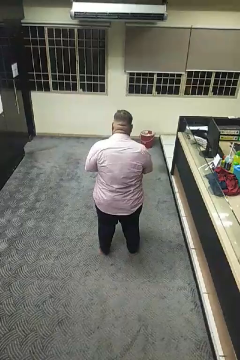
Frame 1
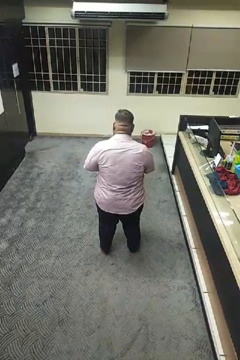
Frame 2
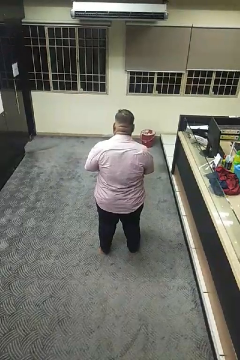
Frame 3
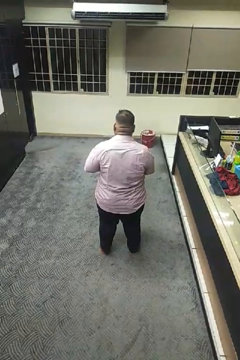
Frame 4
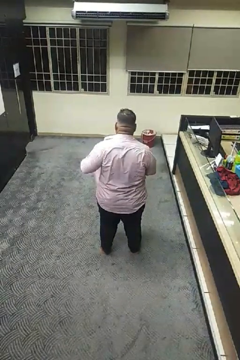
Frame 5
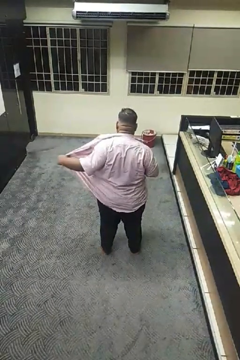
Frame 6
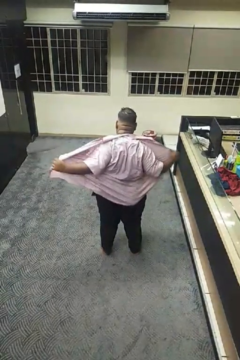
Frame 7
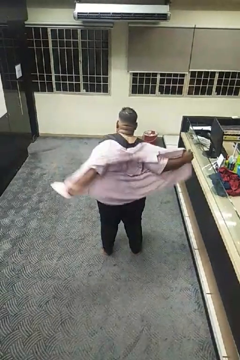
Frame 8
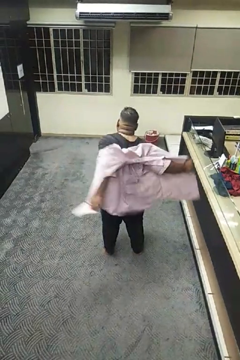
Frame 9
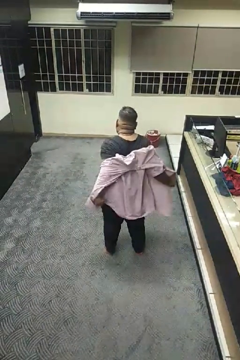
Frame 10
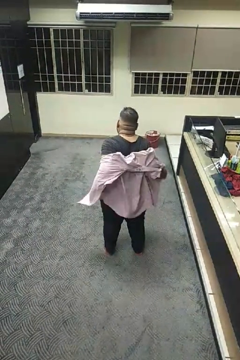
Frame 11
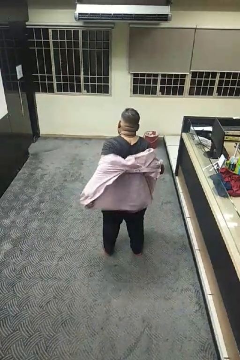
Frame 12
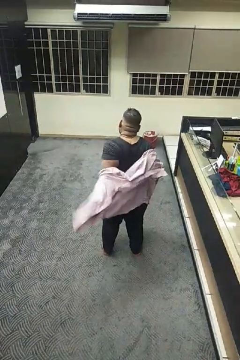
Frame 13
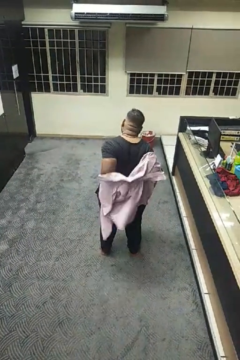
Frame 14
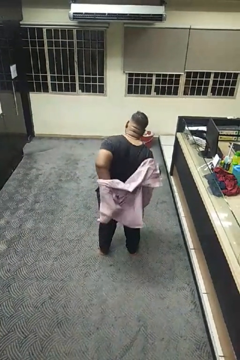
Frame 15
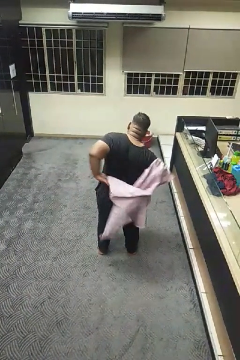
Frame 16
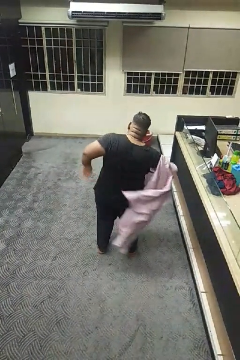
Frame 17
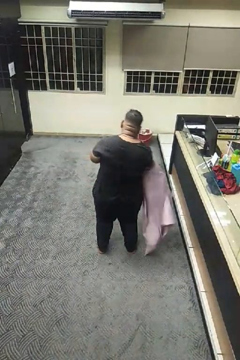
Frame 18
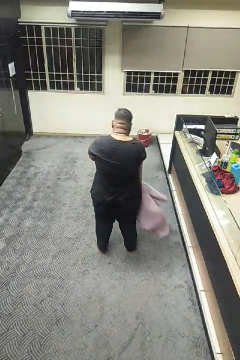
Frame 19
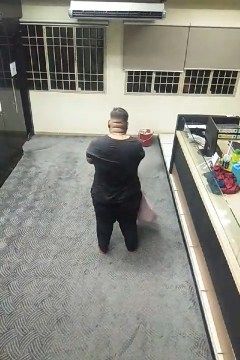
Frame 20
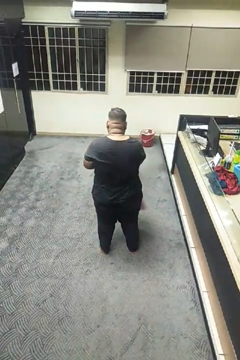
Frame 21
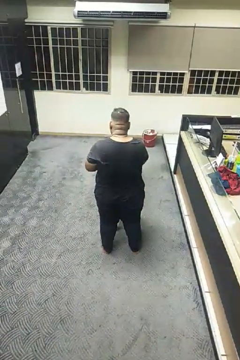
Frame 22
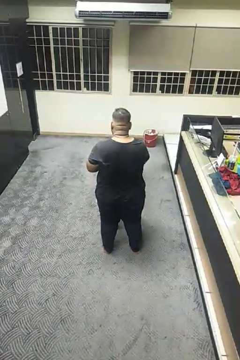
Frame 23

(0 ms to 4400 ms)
person takes off shirt

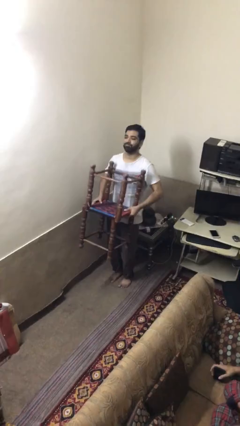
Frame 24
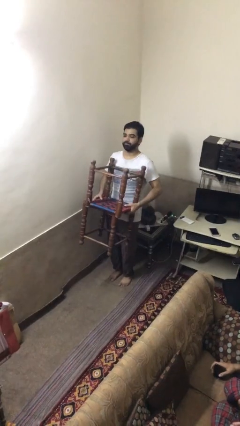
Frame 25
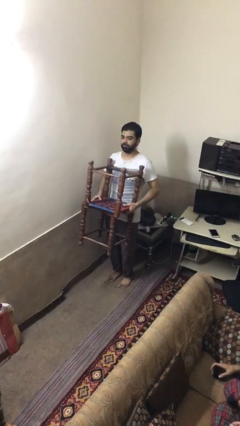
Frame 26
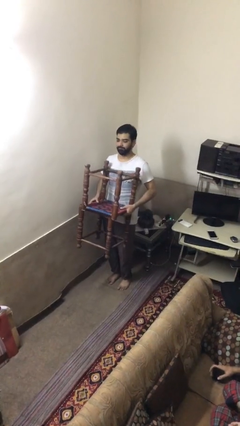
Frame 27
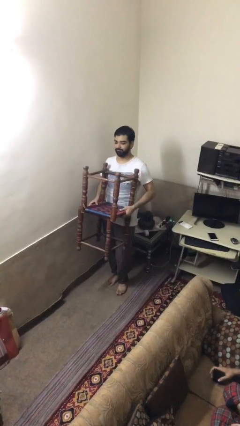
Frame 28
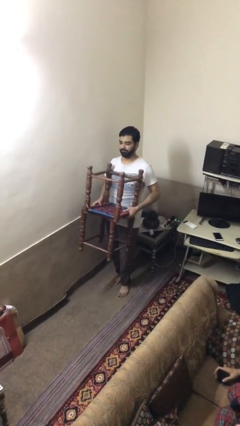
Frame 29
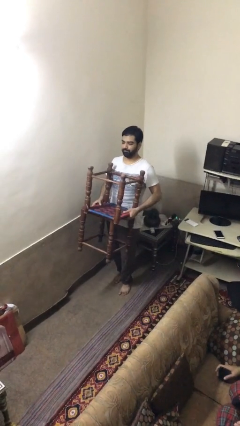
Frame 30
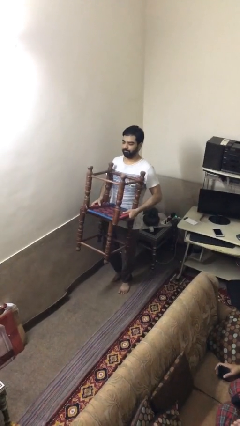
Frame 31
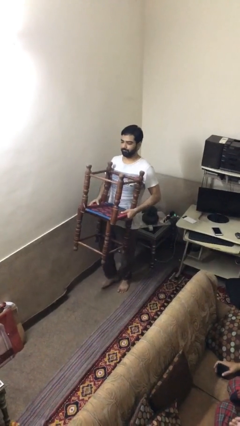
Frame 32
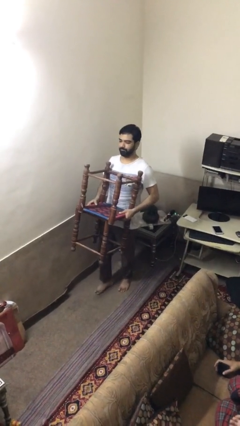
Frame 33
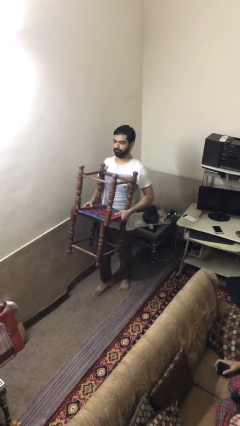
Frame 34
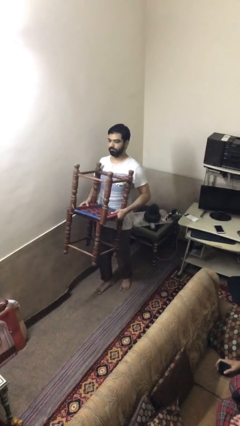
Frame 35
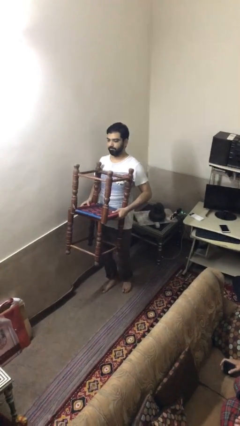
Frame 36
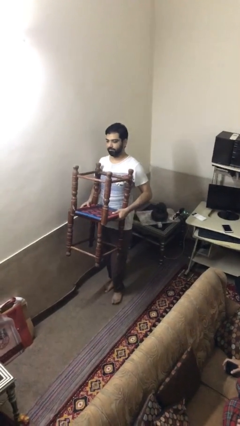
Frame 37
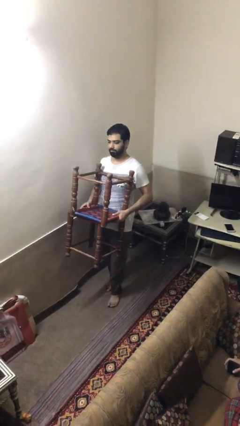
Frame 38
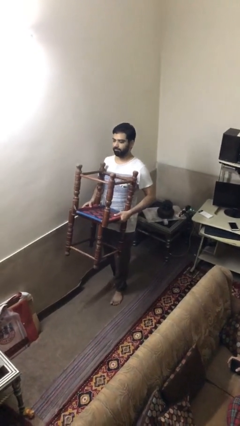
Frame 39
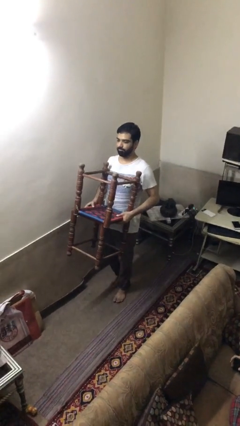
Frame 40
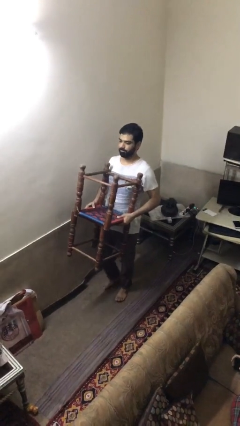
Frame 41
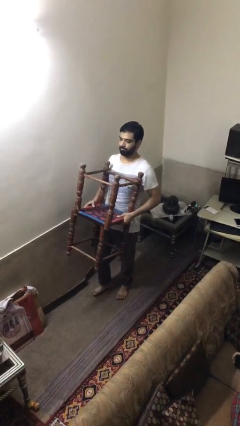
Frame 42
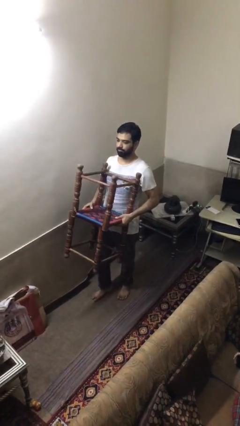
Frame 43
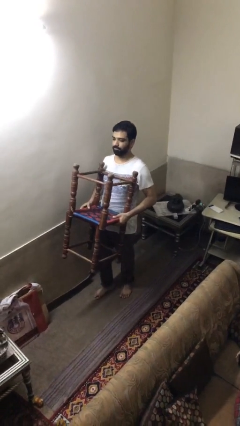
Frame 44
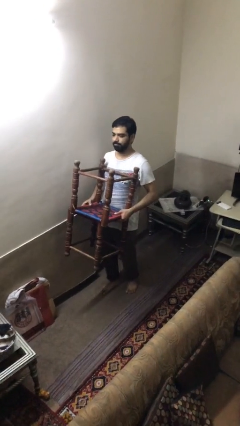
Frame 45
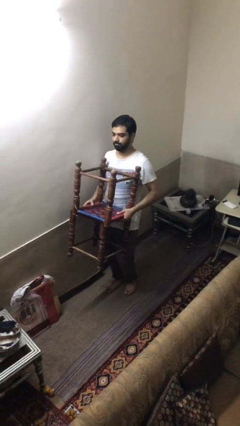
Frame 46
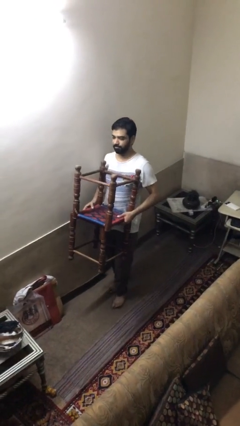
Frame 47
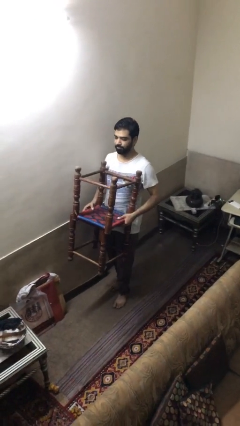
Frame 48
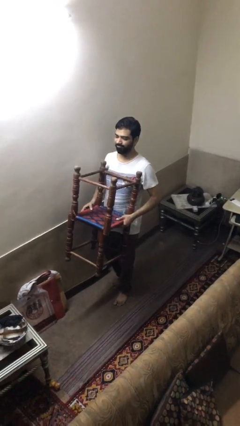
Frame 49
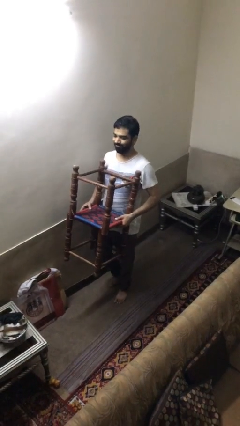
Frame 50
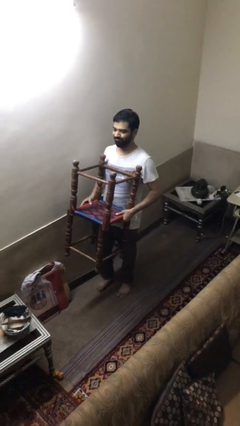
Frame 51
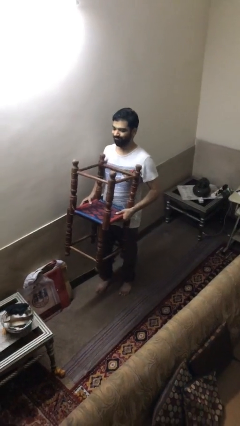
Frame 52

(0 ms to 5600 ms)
person carries heavy object

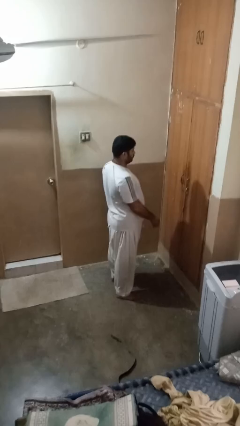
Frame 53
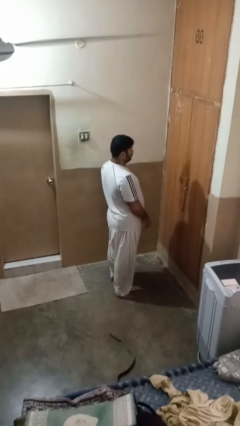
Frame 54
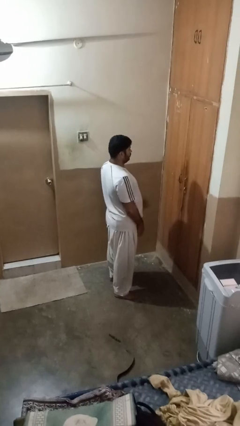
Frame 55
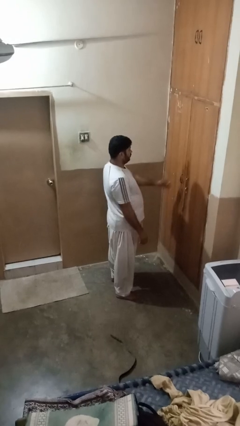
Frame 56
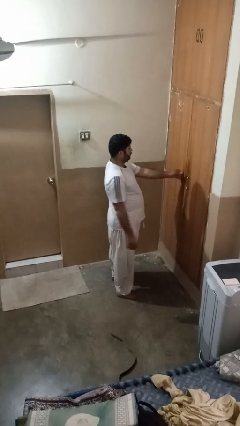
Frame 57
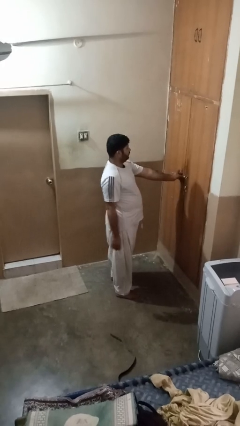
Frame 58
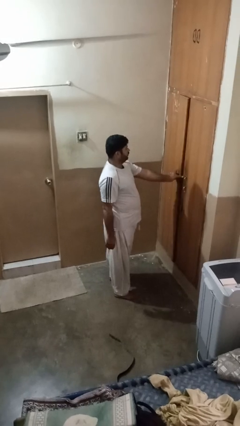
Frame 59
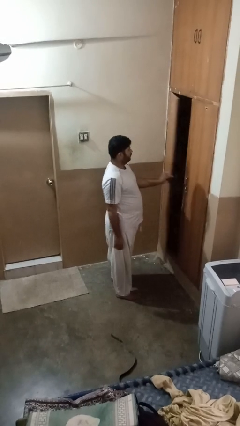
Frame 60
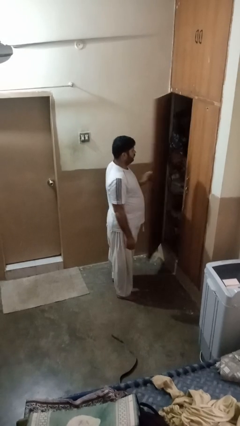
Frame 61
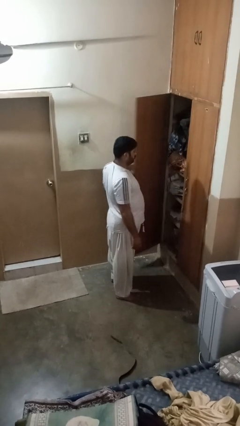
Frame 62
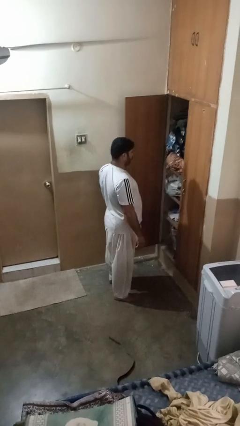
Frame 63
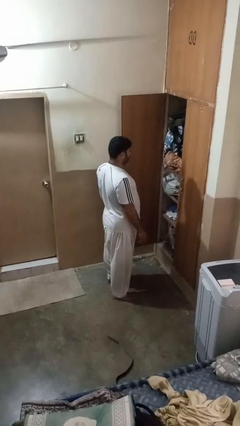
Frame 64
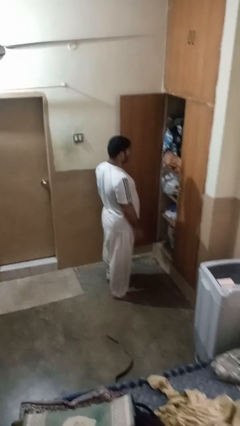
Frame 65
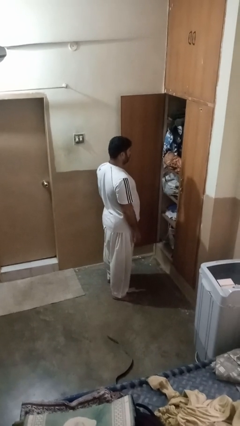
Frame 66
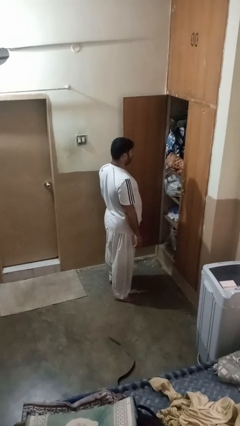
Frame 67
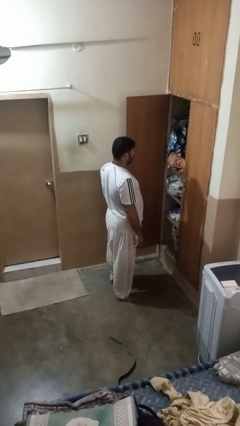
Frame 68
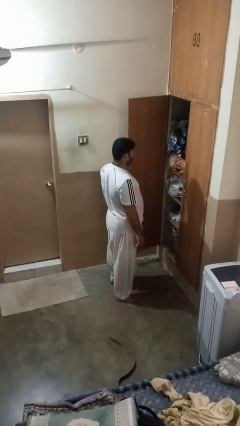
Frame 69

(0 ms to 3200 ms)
person opens closet door

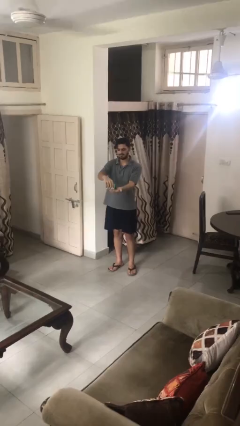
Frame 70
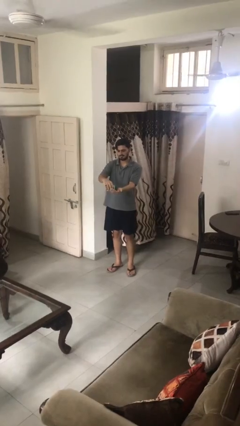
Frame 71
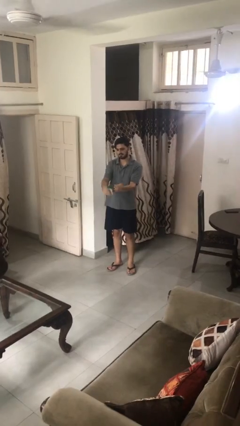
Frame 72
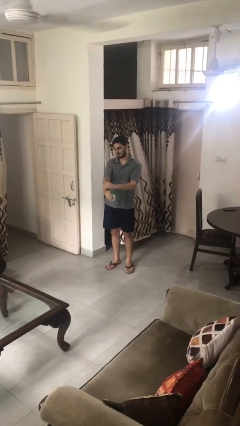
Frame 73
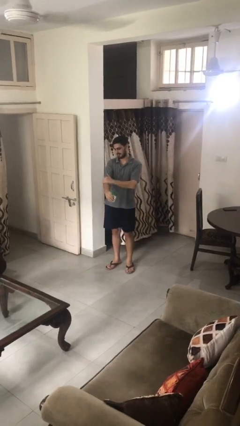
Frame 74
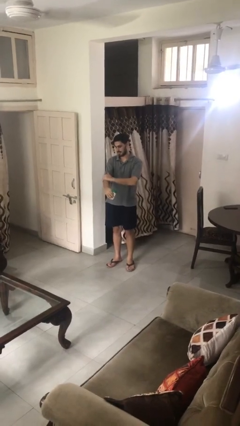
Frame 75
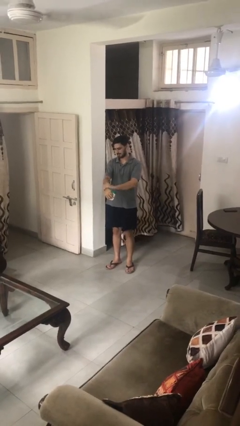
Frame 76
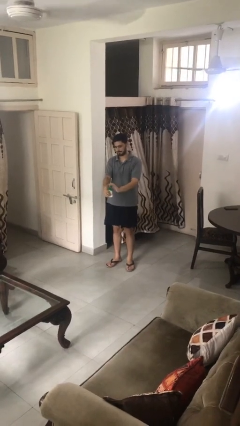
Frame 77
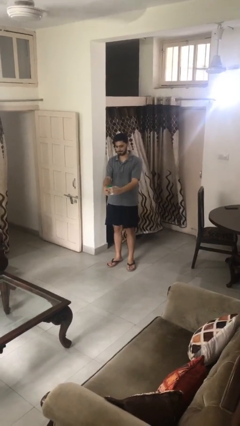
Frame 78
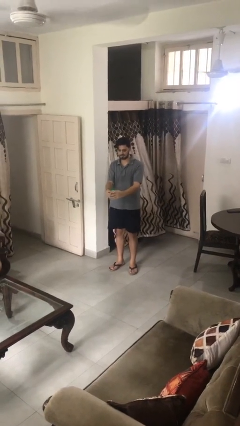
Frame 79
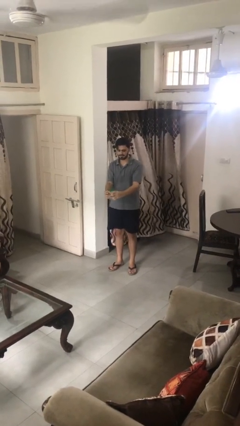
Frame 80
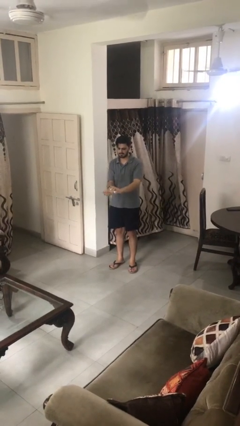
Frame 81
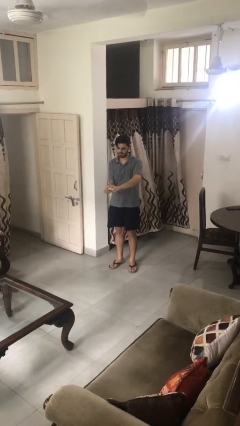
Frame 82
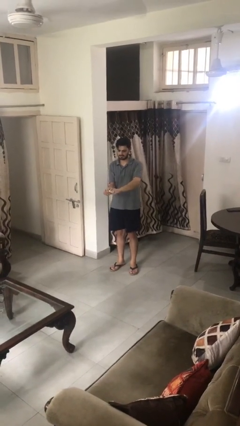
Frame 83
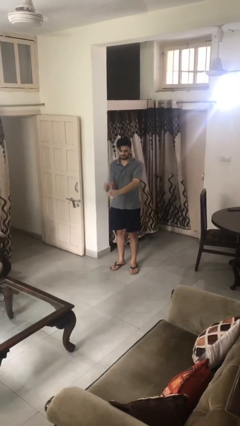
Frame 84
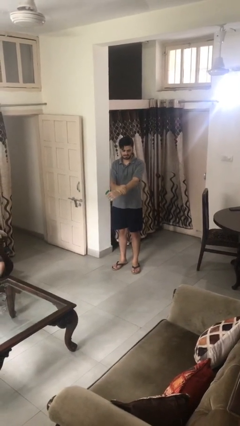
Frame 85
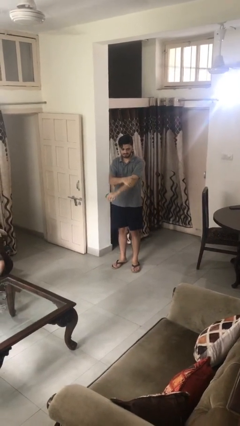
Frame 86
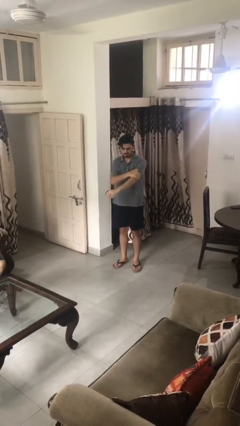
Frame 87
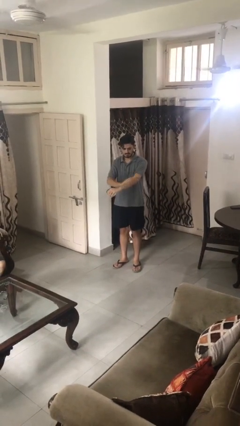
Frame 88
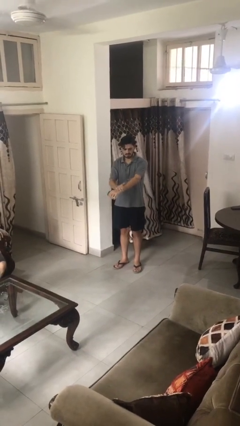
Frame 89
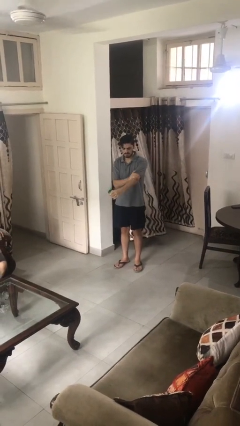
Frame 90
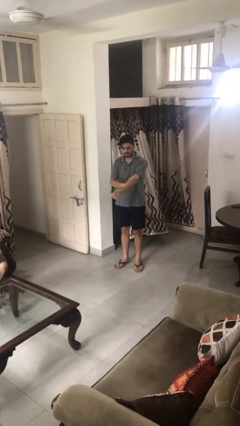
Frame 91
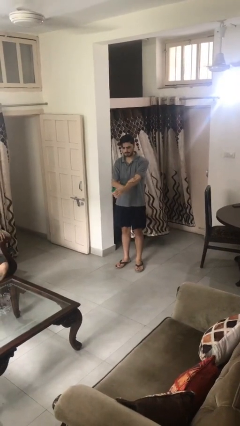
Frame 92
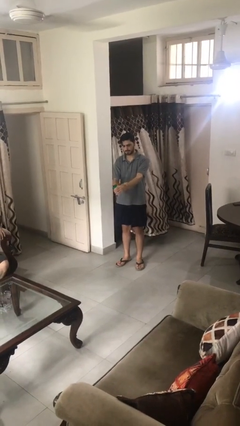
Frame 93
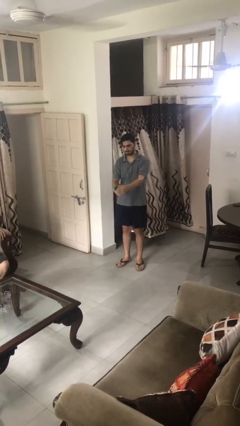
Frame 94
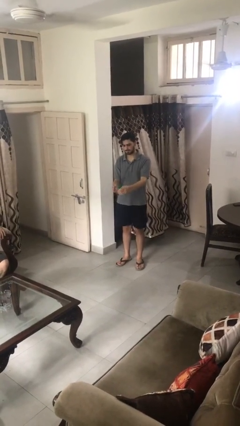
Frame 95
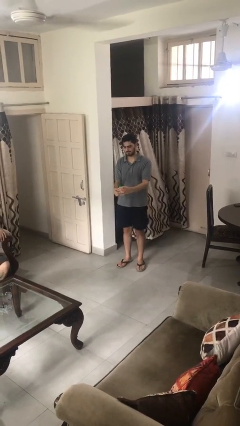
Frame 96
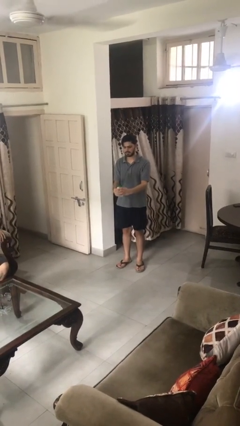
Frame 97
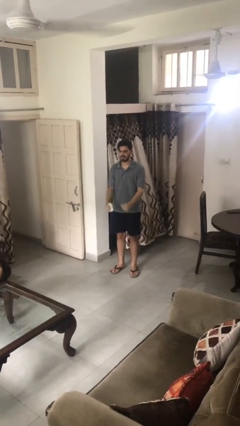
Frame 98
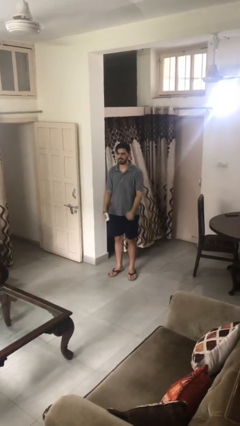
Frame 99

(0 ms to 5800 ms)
person applies sunscreen
